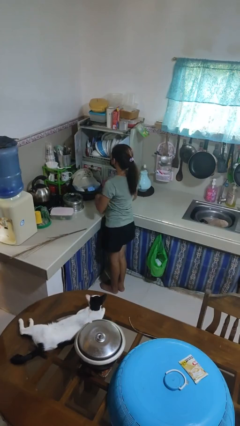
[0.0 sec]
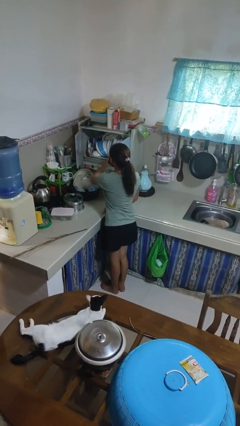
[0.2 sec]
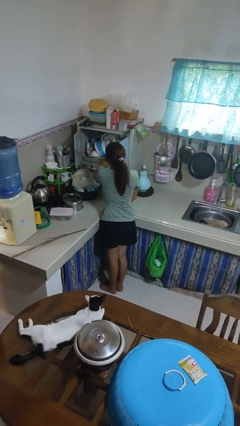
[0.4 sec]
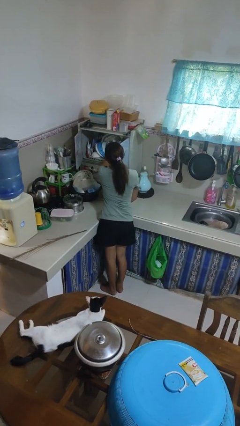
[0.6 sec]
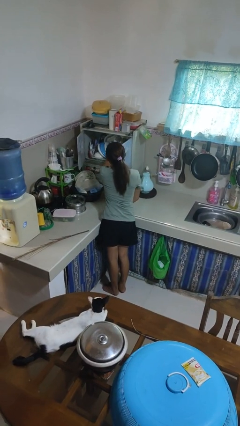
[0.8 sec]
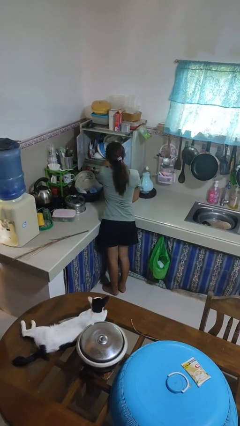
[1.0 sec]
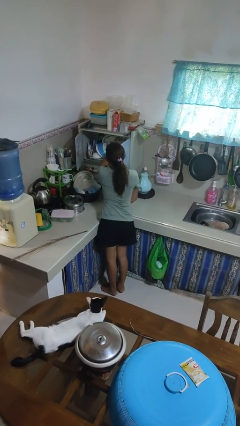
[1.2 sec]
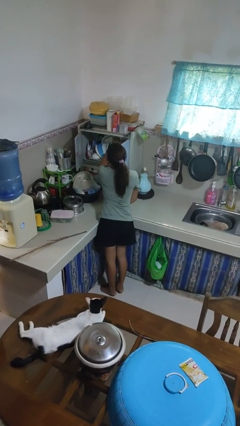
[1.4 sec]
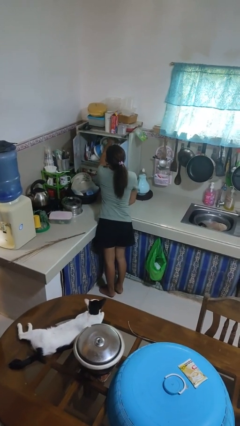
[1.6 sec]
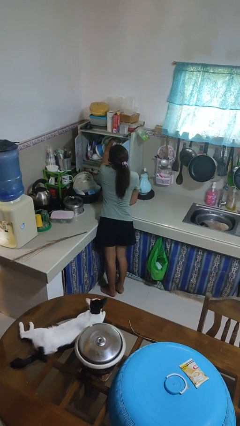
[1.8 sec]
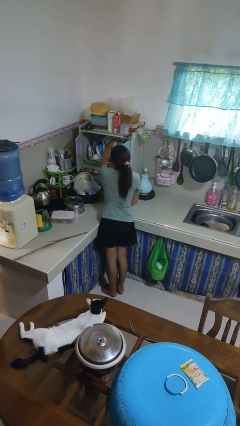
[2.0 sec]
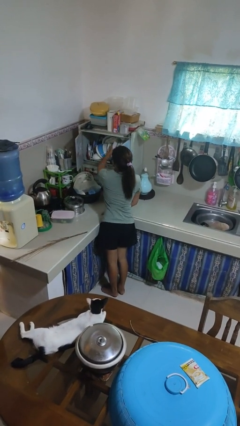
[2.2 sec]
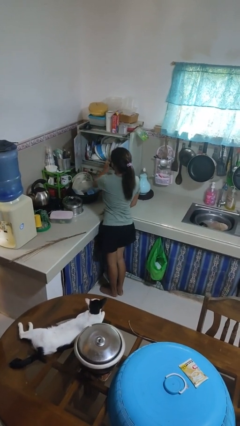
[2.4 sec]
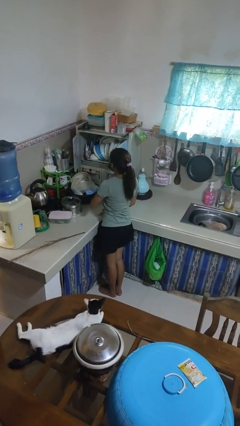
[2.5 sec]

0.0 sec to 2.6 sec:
person searches in kitchen drawer

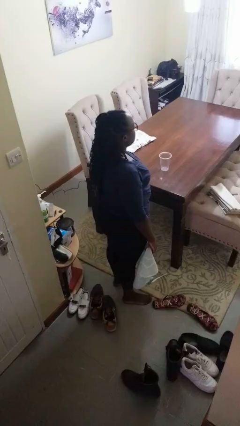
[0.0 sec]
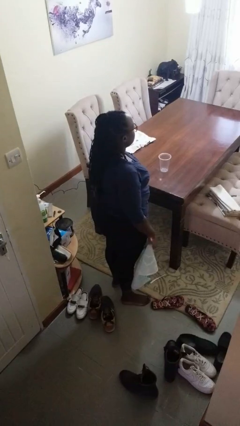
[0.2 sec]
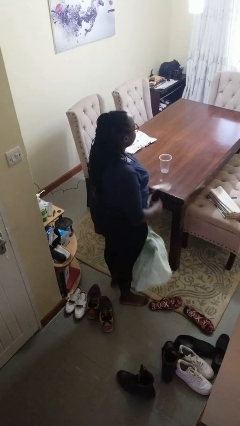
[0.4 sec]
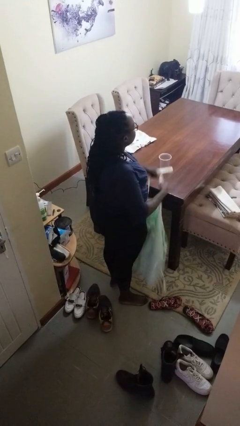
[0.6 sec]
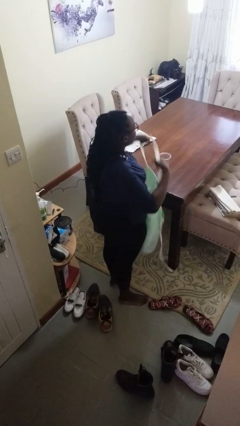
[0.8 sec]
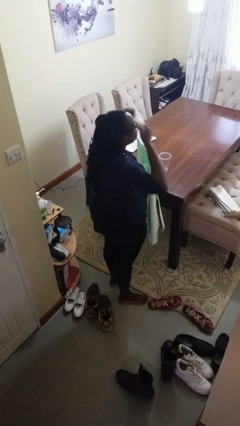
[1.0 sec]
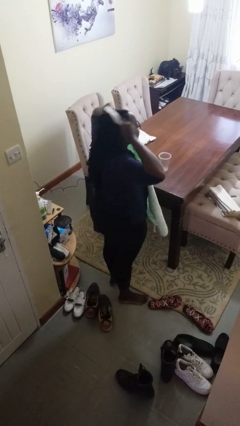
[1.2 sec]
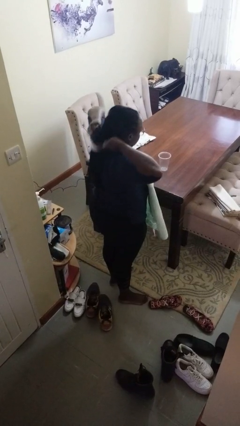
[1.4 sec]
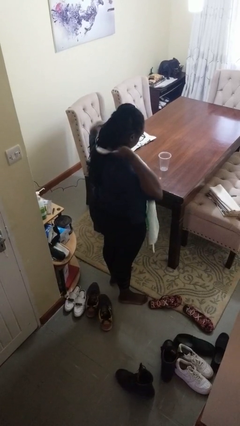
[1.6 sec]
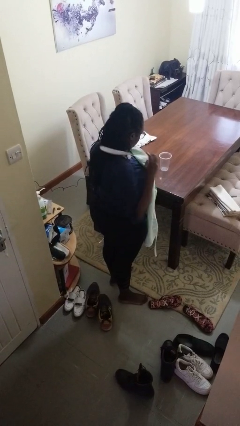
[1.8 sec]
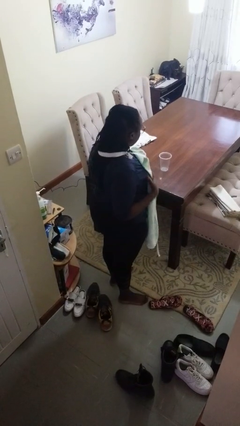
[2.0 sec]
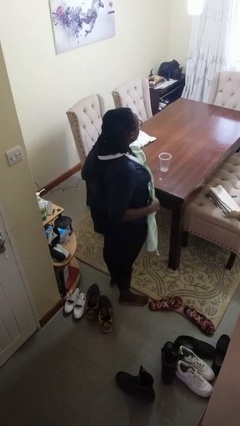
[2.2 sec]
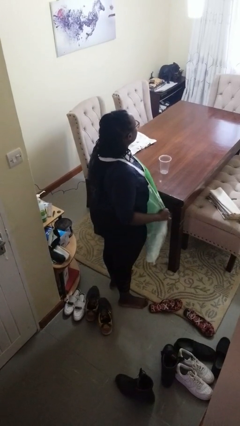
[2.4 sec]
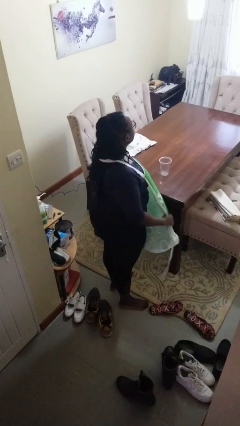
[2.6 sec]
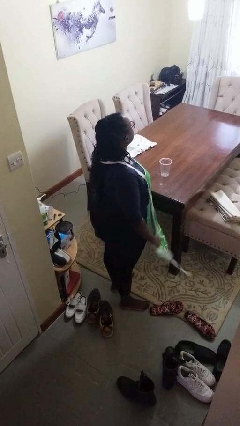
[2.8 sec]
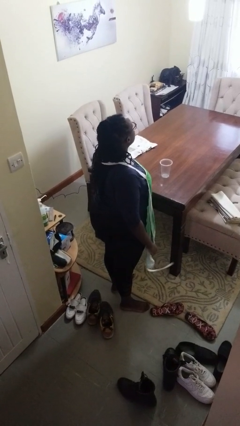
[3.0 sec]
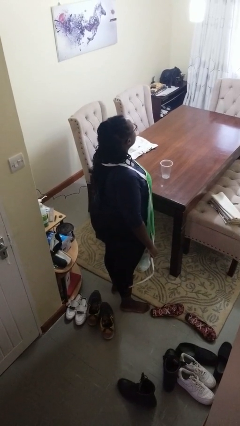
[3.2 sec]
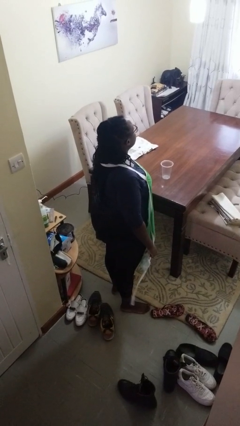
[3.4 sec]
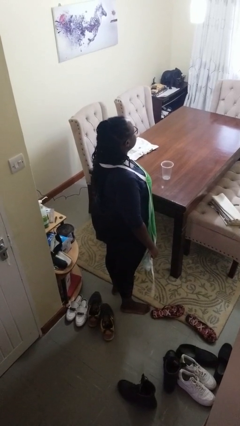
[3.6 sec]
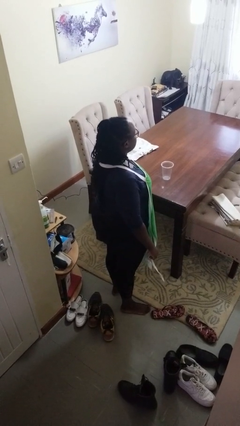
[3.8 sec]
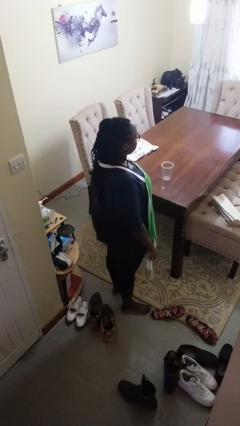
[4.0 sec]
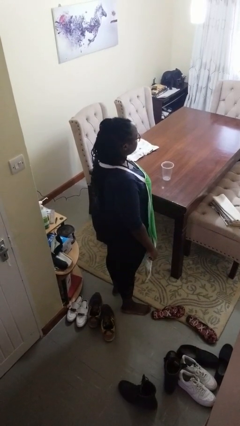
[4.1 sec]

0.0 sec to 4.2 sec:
person puts on apron

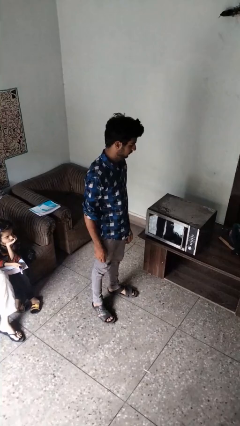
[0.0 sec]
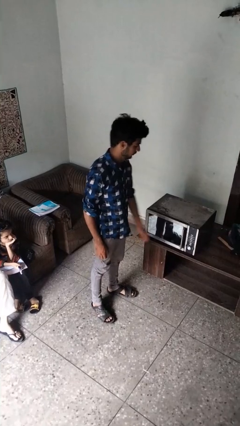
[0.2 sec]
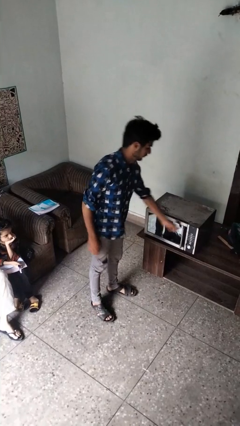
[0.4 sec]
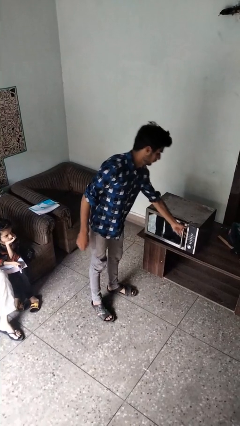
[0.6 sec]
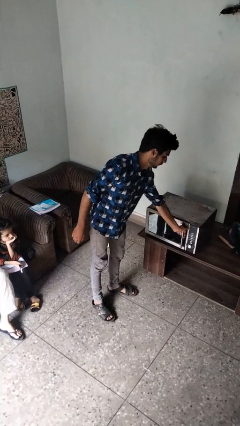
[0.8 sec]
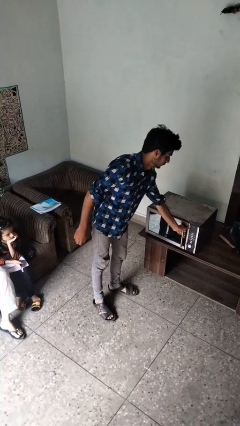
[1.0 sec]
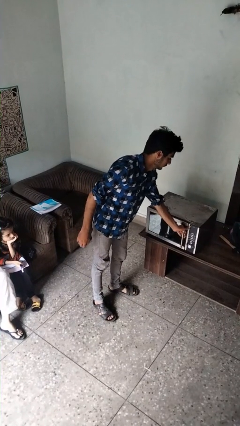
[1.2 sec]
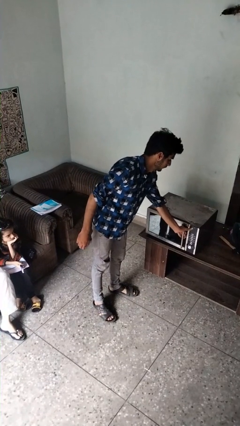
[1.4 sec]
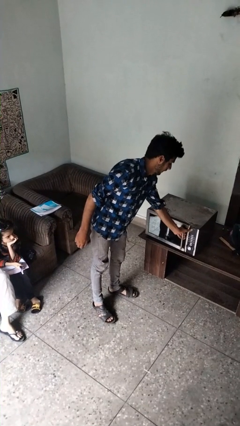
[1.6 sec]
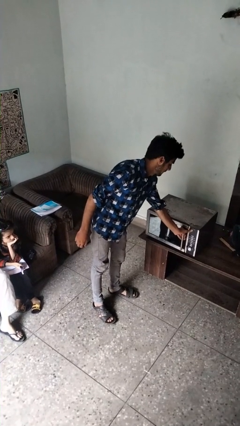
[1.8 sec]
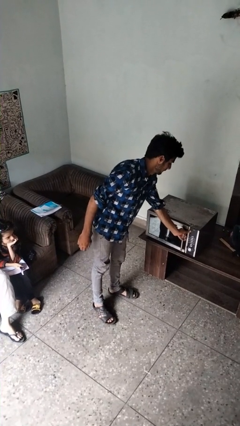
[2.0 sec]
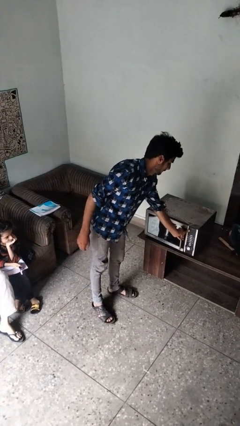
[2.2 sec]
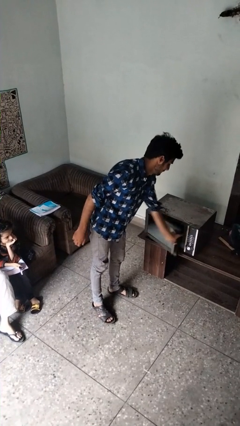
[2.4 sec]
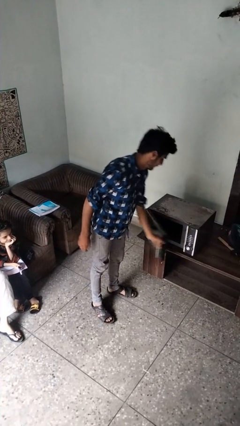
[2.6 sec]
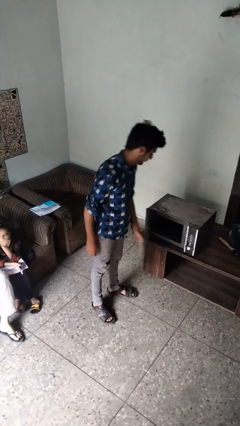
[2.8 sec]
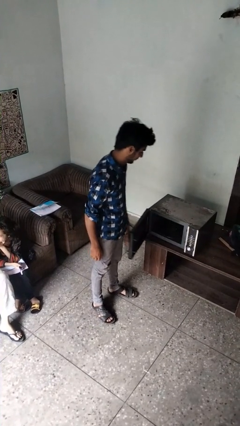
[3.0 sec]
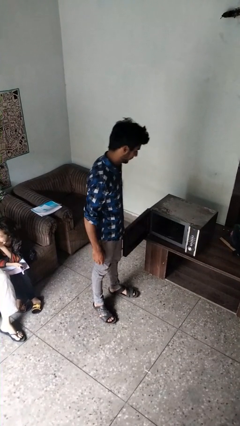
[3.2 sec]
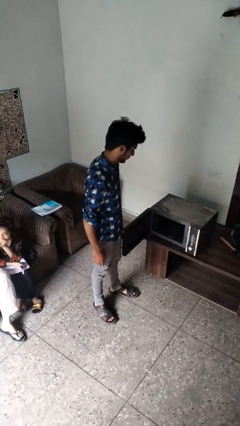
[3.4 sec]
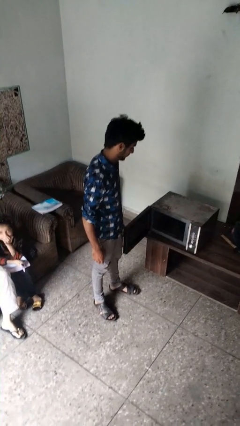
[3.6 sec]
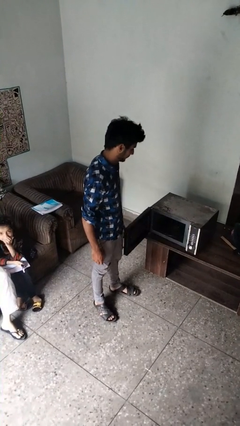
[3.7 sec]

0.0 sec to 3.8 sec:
person opens microwave

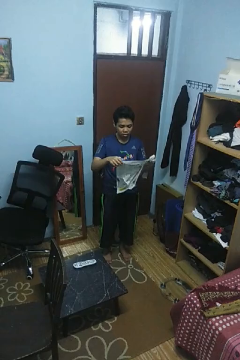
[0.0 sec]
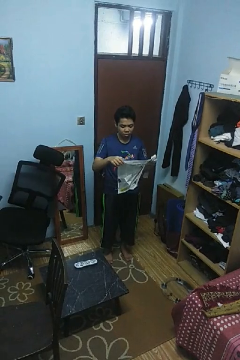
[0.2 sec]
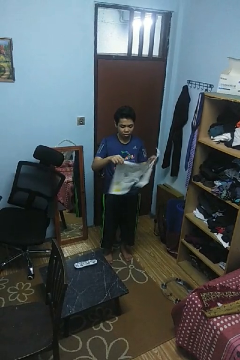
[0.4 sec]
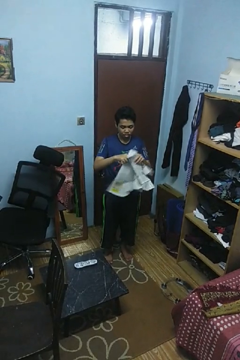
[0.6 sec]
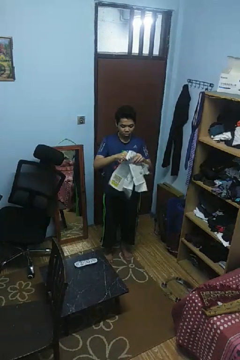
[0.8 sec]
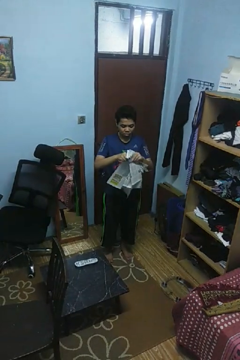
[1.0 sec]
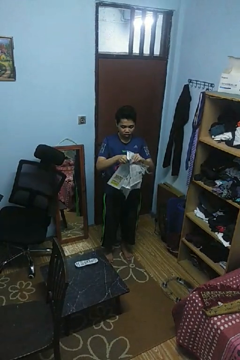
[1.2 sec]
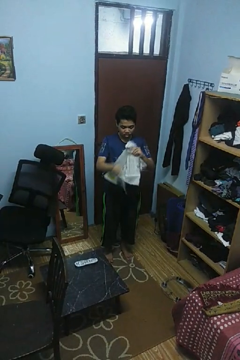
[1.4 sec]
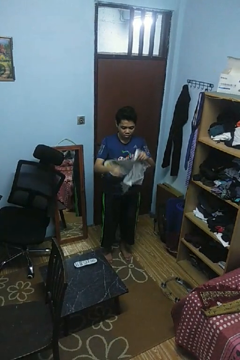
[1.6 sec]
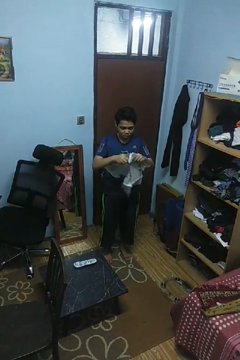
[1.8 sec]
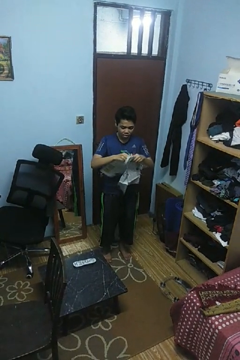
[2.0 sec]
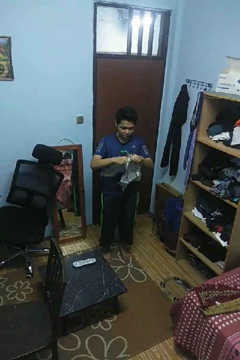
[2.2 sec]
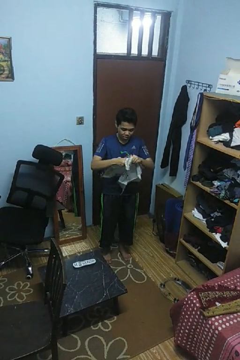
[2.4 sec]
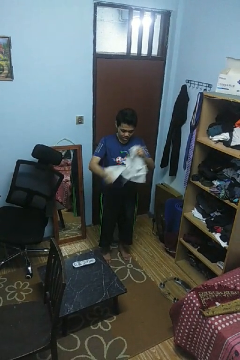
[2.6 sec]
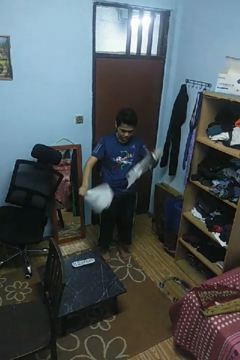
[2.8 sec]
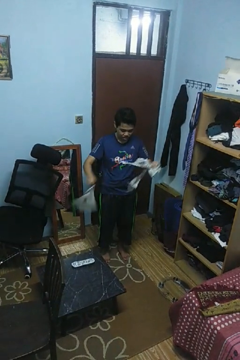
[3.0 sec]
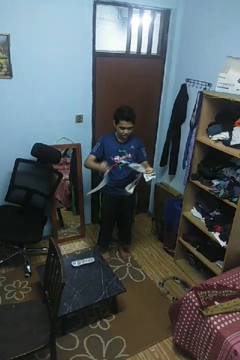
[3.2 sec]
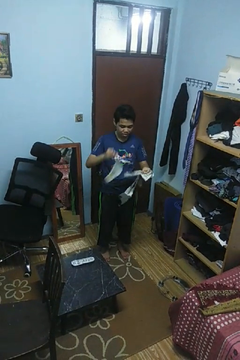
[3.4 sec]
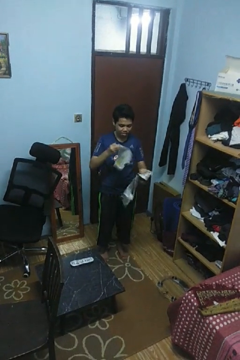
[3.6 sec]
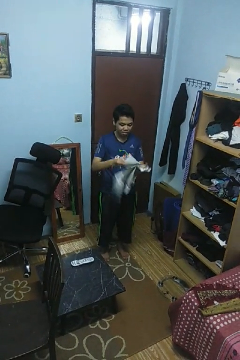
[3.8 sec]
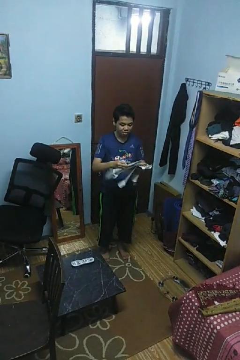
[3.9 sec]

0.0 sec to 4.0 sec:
person tears paper

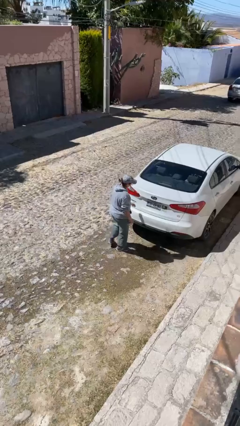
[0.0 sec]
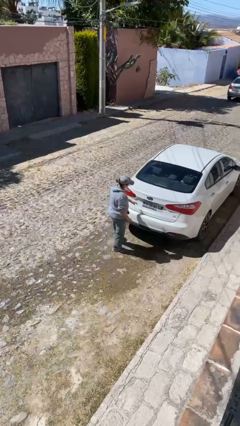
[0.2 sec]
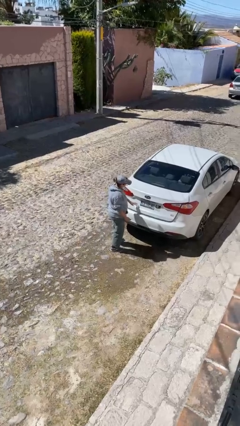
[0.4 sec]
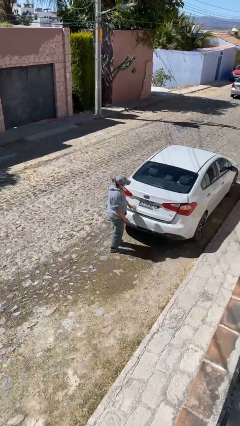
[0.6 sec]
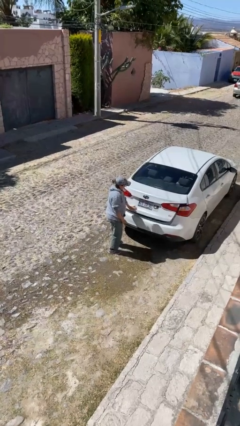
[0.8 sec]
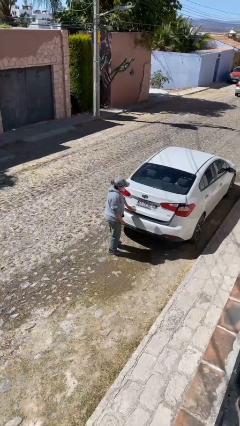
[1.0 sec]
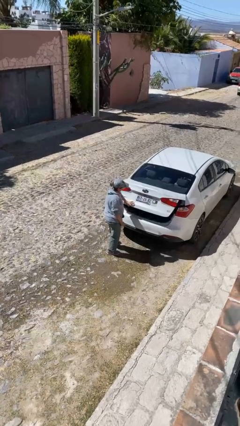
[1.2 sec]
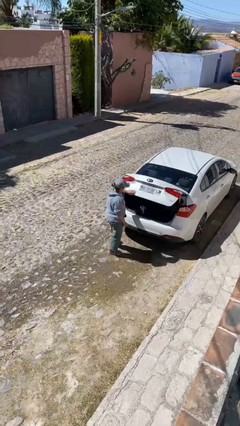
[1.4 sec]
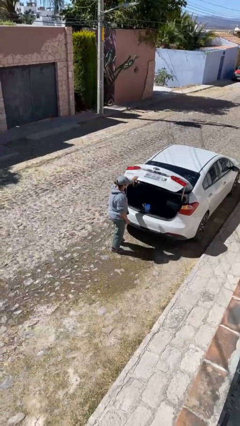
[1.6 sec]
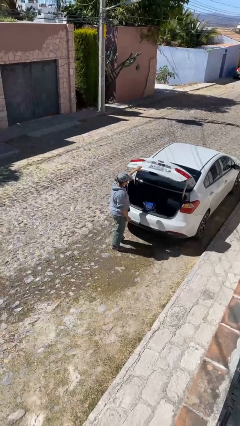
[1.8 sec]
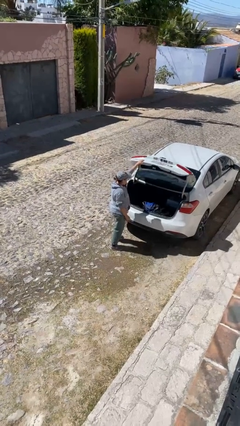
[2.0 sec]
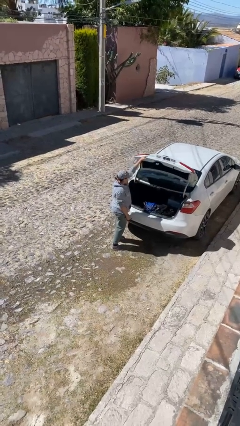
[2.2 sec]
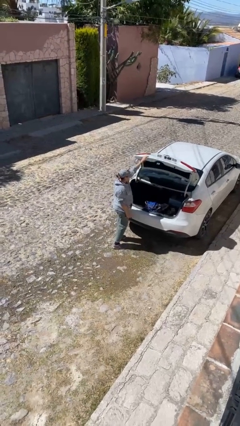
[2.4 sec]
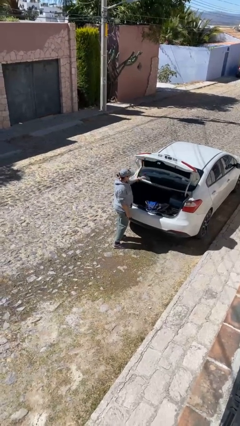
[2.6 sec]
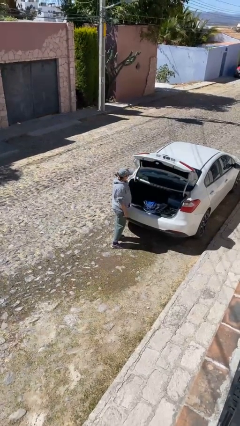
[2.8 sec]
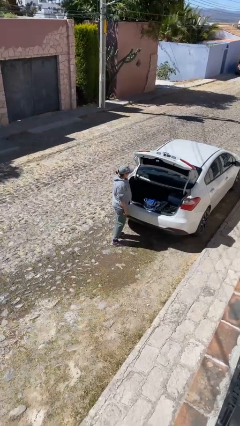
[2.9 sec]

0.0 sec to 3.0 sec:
person opens car trunk

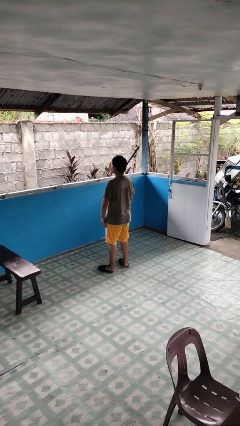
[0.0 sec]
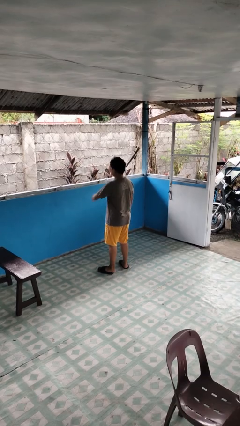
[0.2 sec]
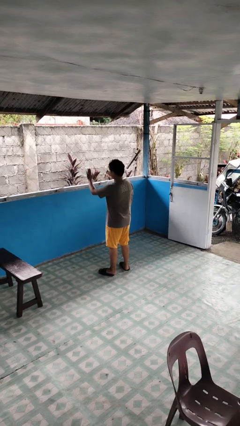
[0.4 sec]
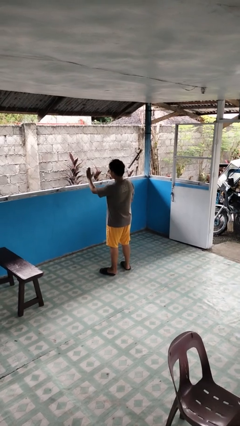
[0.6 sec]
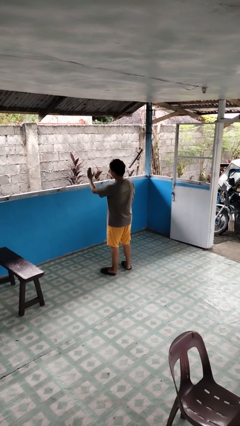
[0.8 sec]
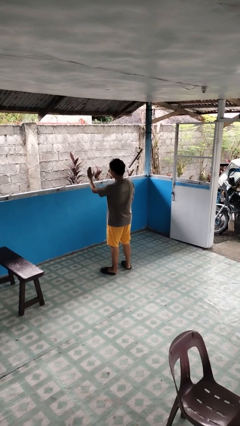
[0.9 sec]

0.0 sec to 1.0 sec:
person gestures stop
